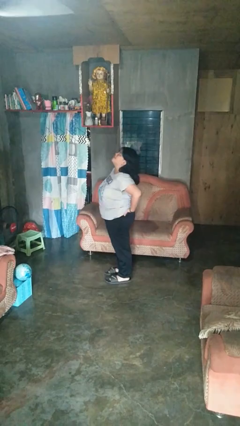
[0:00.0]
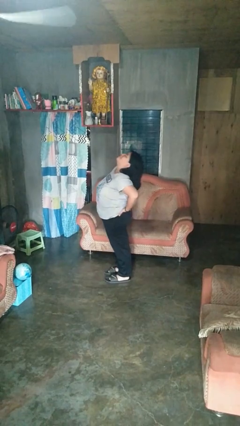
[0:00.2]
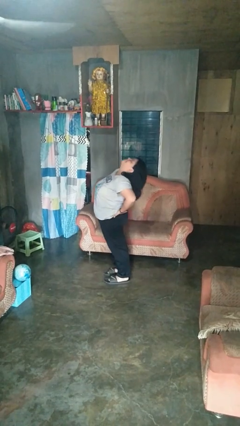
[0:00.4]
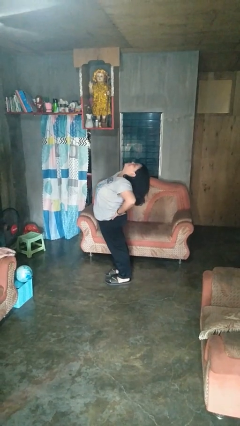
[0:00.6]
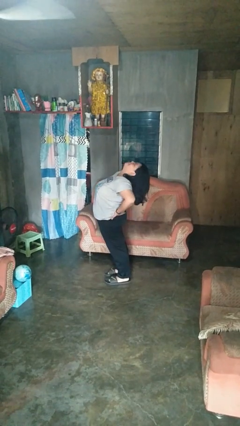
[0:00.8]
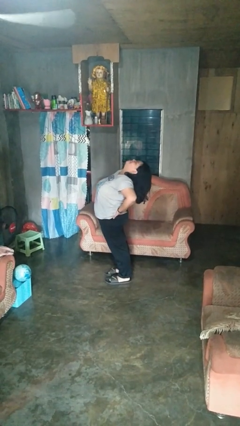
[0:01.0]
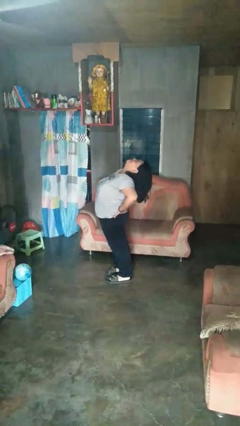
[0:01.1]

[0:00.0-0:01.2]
person stretches back

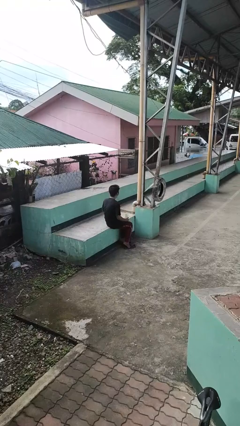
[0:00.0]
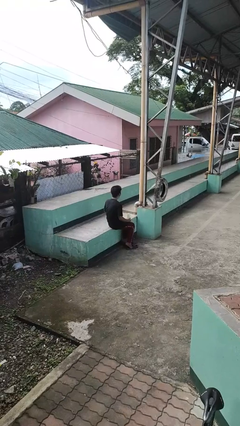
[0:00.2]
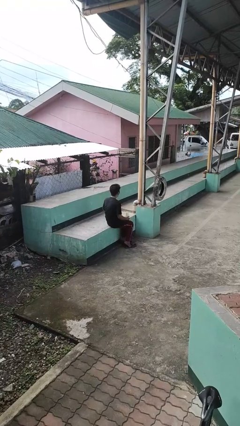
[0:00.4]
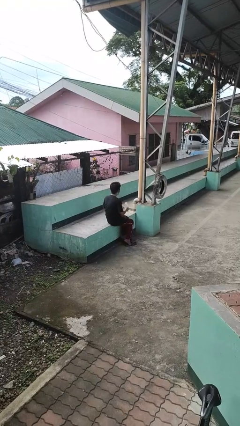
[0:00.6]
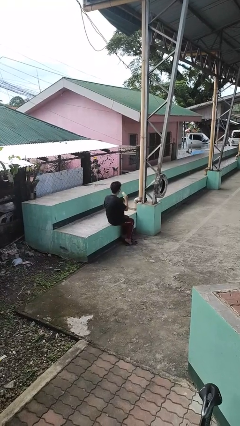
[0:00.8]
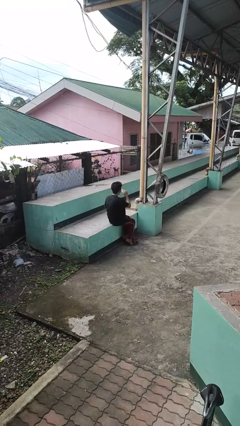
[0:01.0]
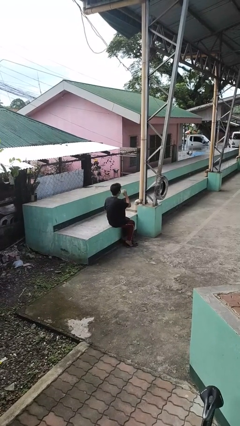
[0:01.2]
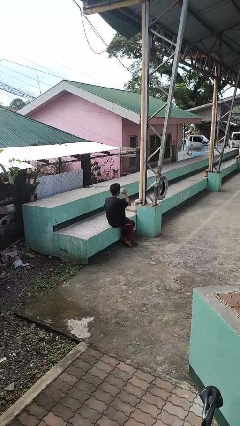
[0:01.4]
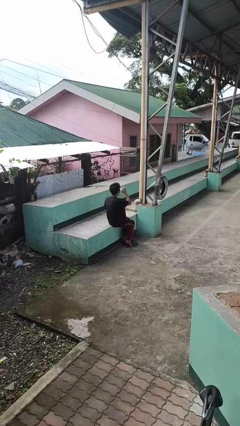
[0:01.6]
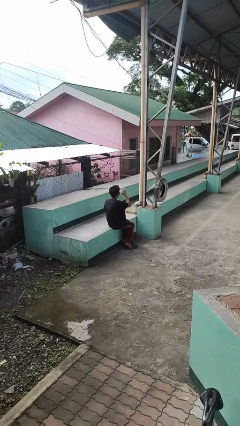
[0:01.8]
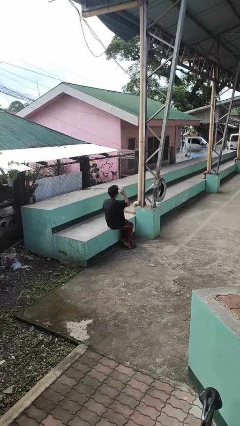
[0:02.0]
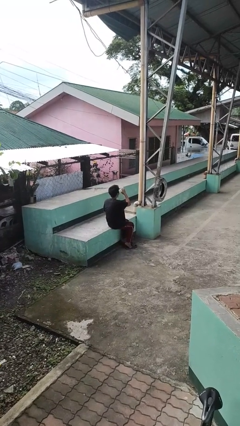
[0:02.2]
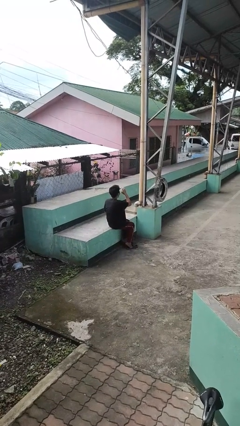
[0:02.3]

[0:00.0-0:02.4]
person drinks from bottle

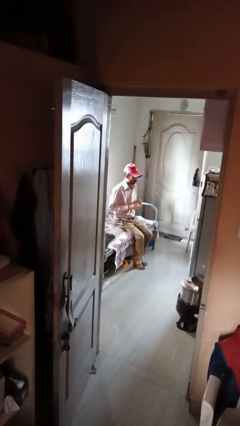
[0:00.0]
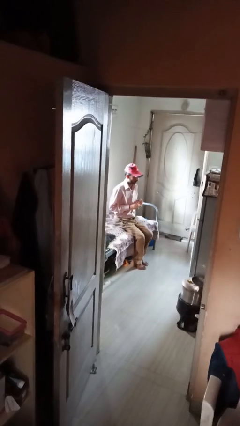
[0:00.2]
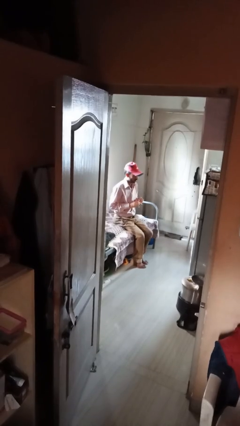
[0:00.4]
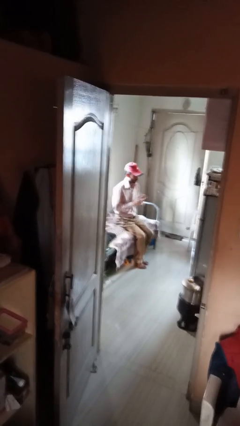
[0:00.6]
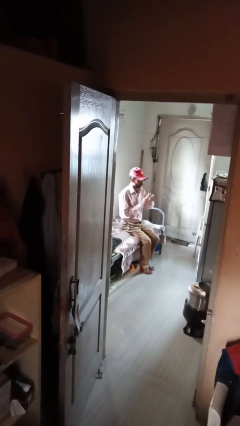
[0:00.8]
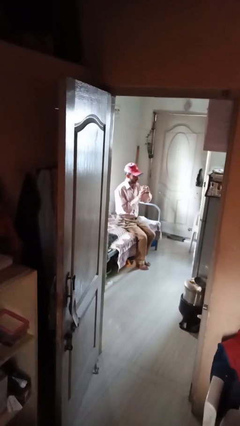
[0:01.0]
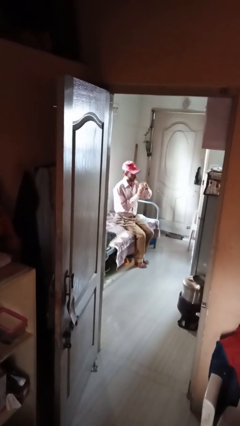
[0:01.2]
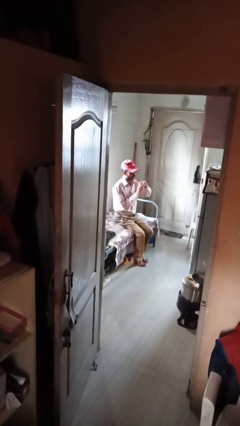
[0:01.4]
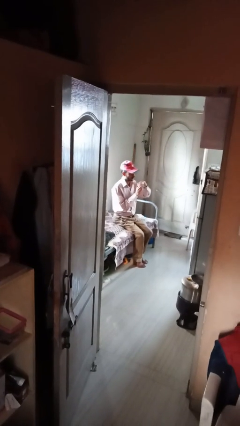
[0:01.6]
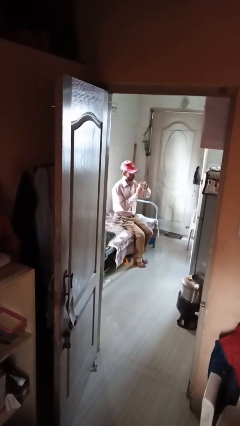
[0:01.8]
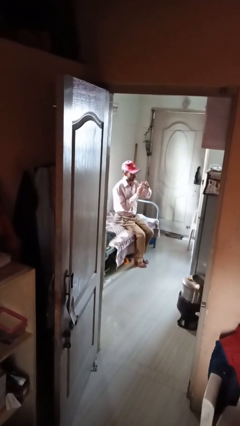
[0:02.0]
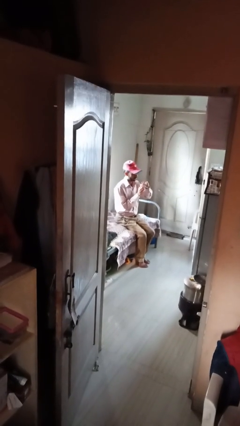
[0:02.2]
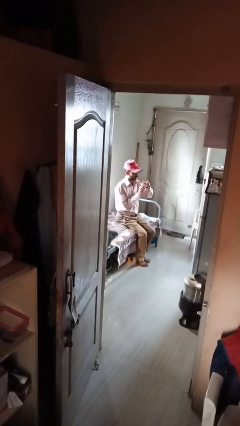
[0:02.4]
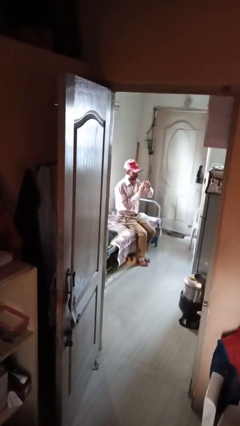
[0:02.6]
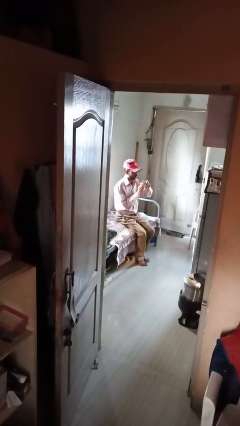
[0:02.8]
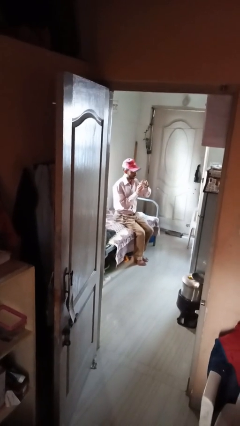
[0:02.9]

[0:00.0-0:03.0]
person files fingernails

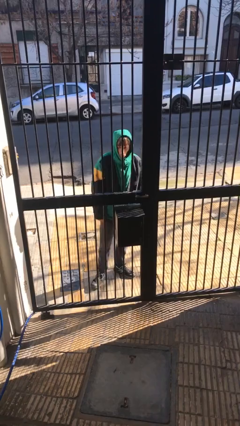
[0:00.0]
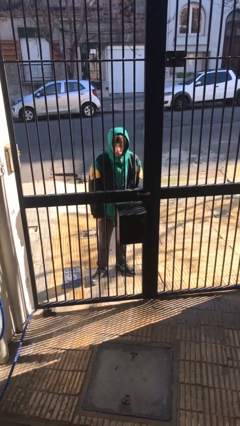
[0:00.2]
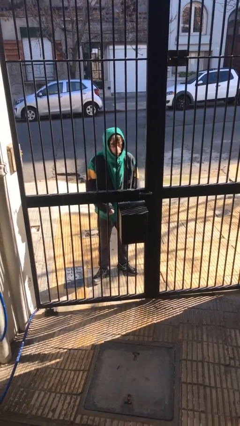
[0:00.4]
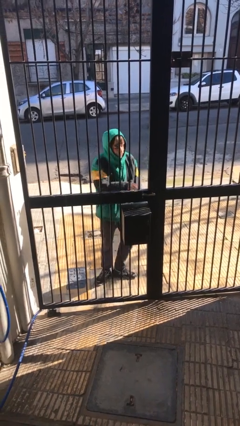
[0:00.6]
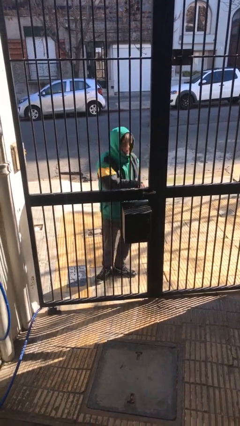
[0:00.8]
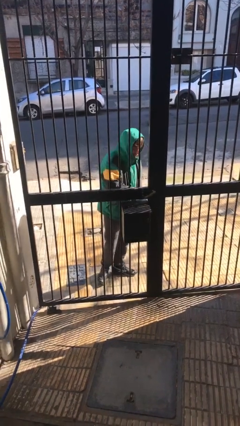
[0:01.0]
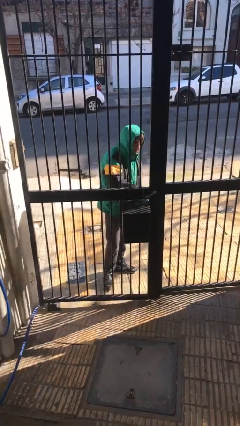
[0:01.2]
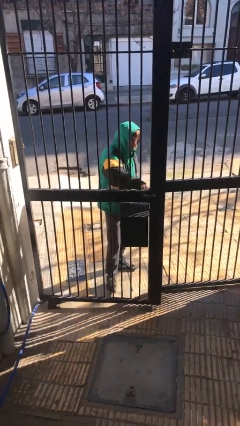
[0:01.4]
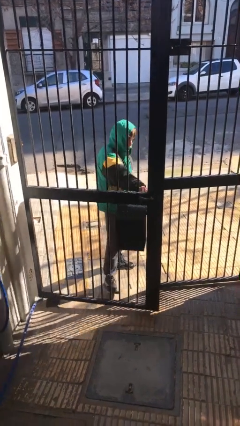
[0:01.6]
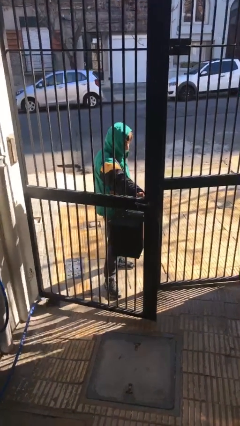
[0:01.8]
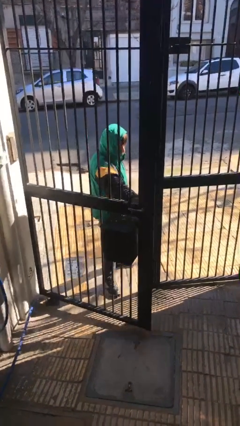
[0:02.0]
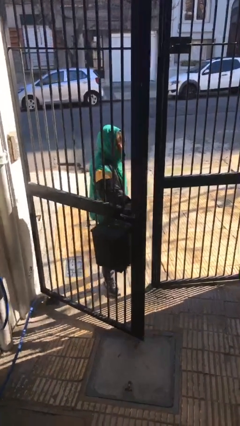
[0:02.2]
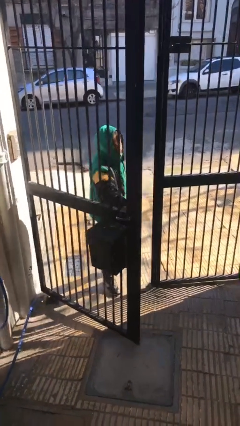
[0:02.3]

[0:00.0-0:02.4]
person opens gate

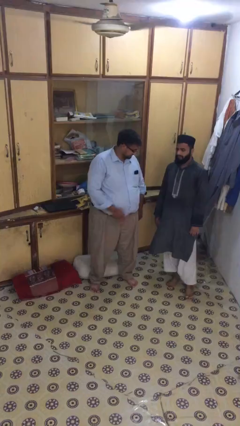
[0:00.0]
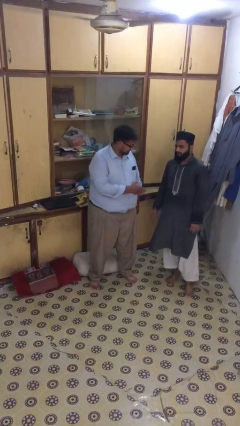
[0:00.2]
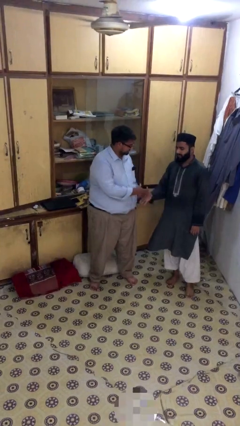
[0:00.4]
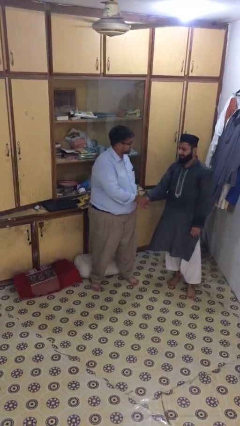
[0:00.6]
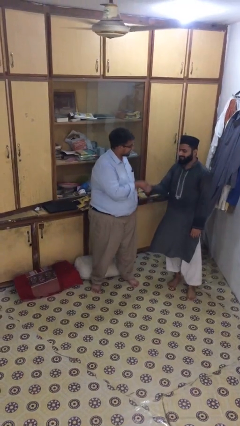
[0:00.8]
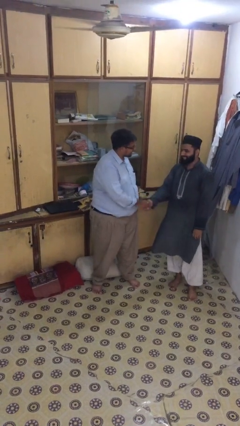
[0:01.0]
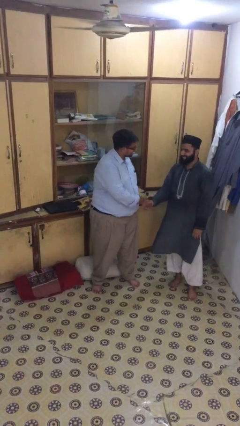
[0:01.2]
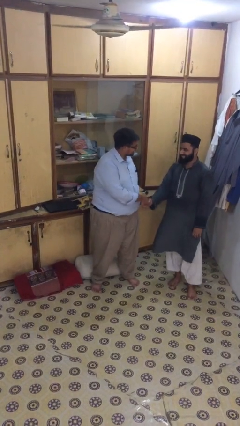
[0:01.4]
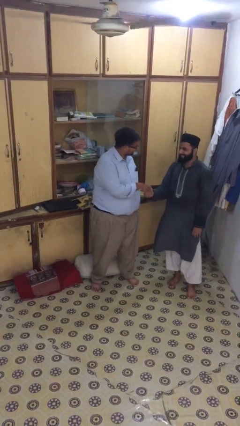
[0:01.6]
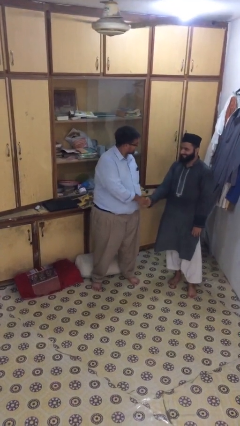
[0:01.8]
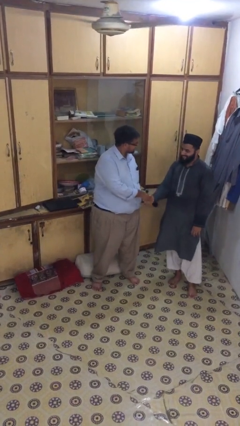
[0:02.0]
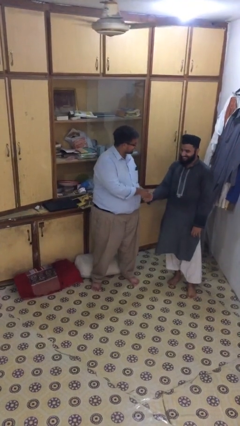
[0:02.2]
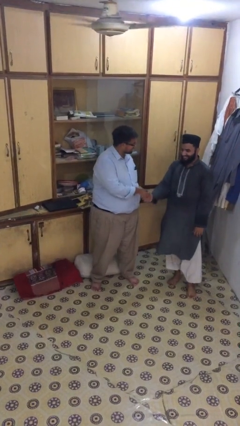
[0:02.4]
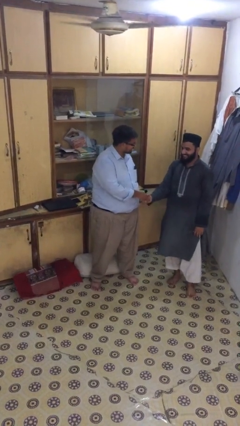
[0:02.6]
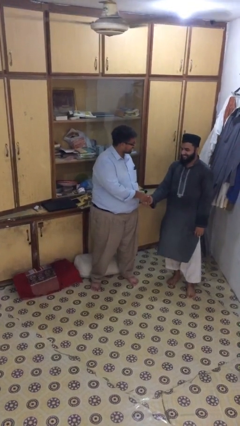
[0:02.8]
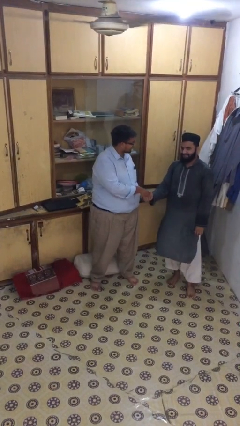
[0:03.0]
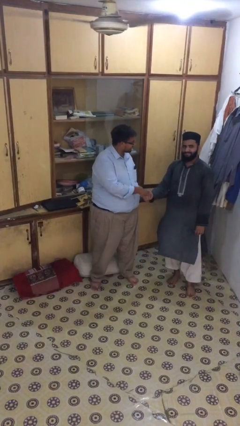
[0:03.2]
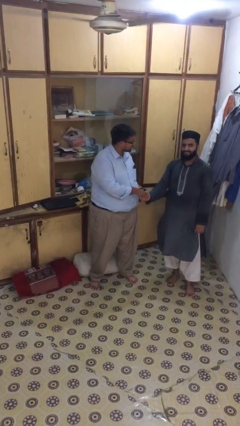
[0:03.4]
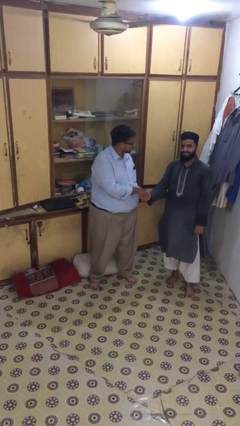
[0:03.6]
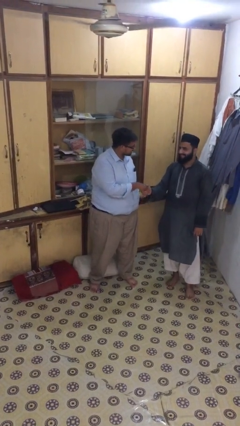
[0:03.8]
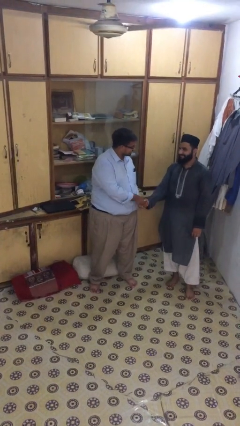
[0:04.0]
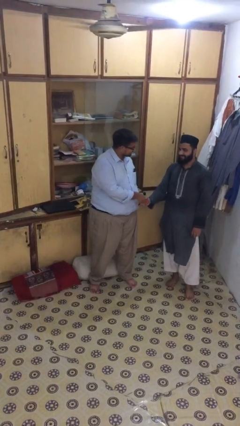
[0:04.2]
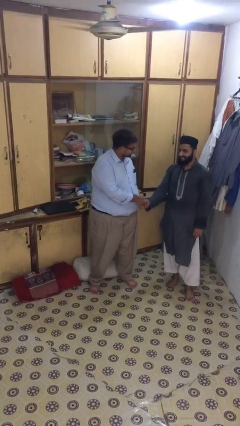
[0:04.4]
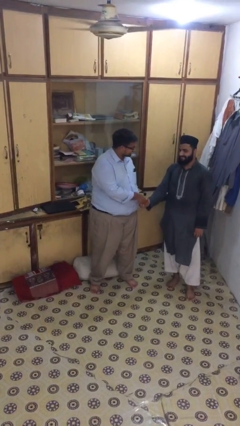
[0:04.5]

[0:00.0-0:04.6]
person shakes hand

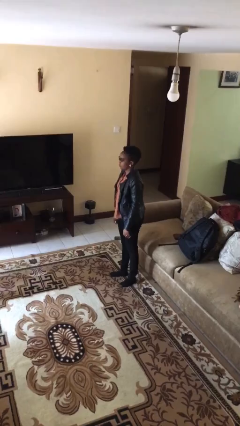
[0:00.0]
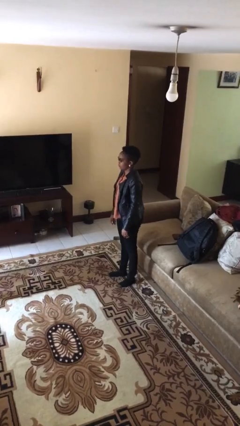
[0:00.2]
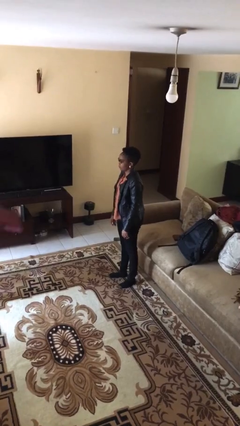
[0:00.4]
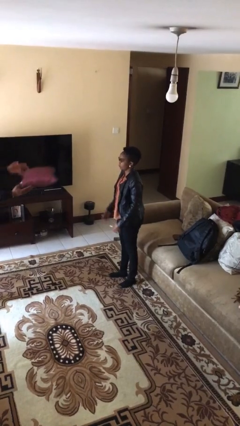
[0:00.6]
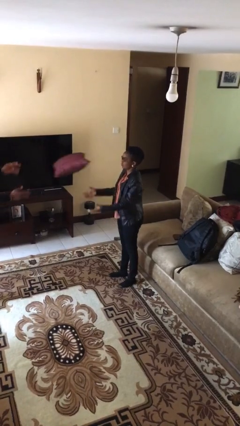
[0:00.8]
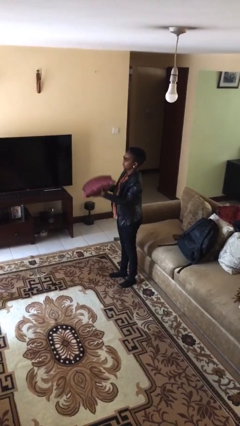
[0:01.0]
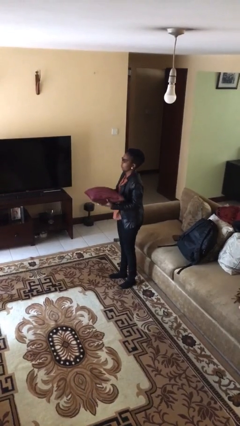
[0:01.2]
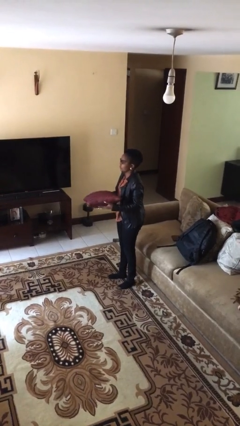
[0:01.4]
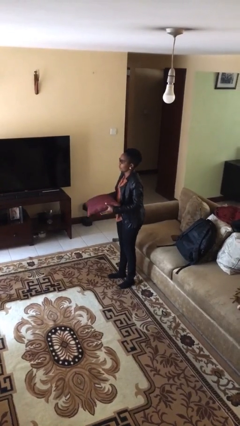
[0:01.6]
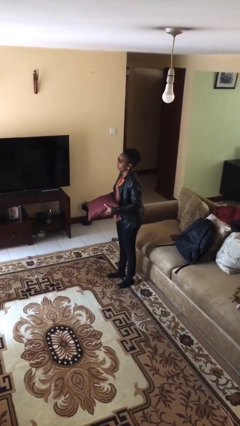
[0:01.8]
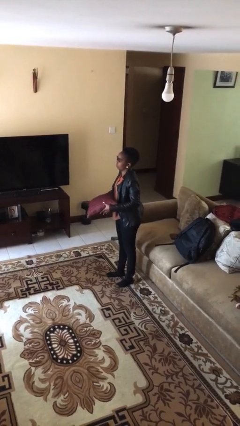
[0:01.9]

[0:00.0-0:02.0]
person catches object from person

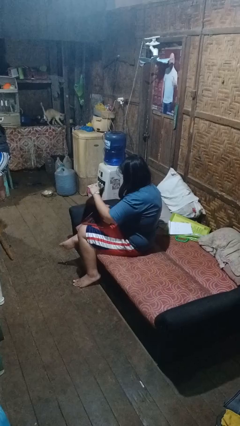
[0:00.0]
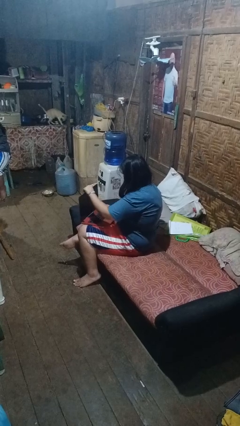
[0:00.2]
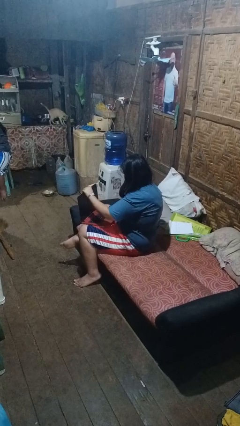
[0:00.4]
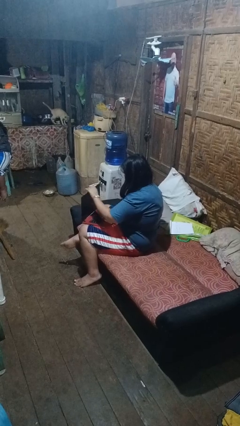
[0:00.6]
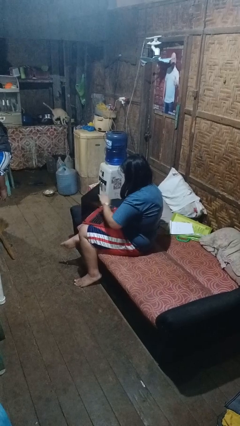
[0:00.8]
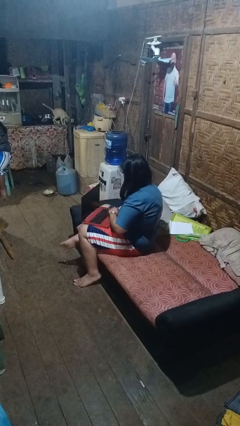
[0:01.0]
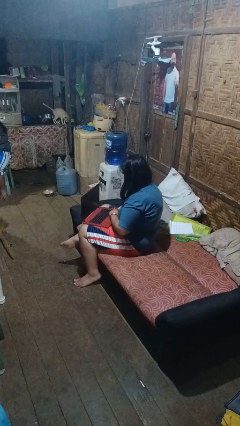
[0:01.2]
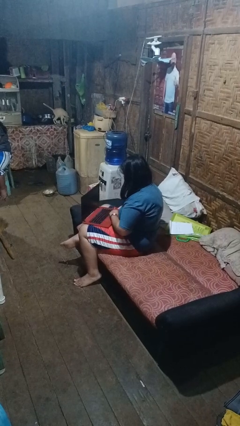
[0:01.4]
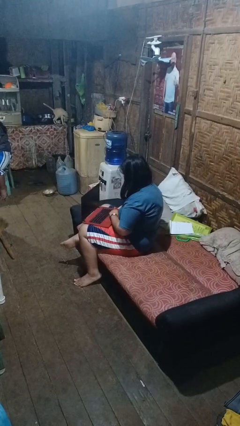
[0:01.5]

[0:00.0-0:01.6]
person opens laptop
